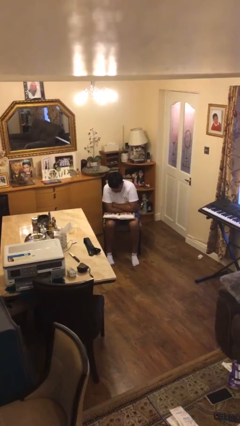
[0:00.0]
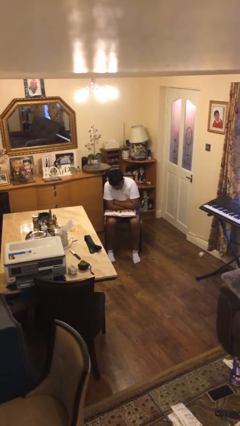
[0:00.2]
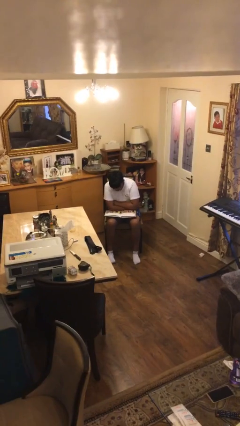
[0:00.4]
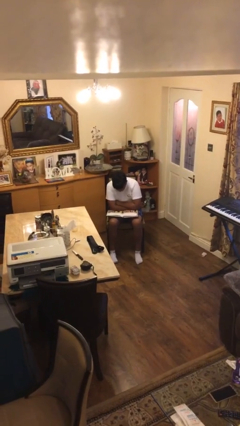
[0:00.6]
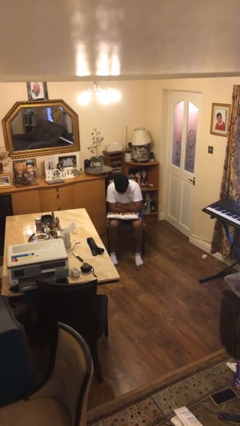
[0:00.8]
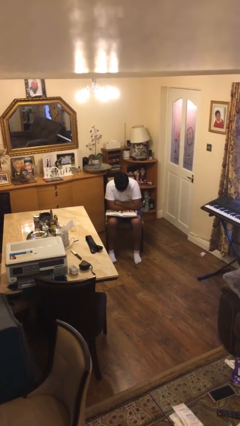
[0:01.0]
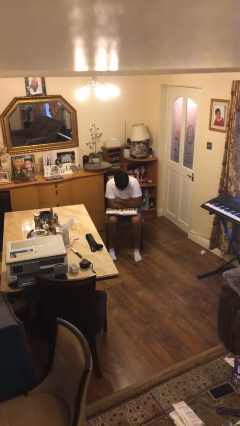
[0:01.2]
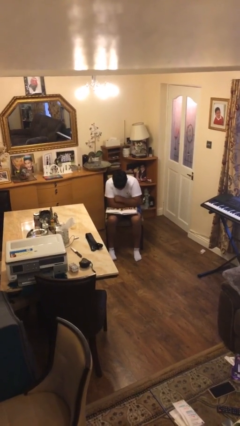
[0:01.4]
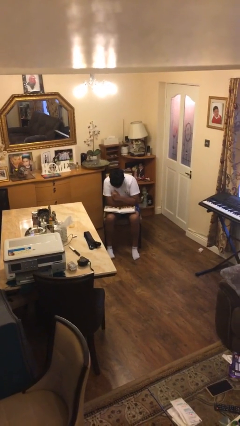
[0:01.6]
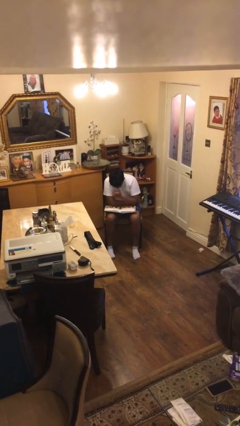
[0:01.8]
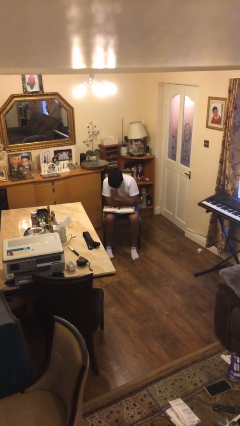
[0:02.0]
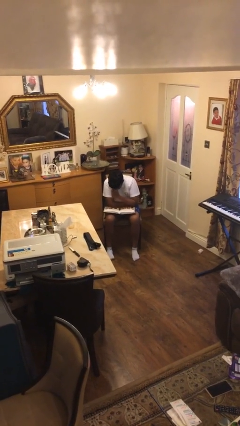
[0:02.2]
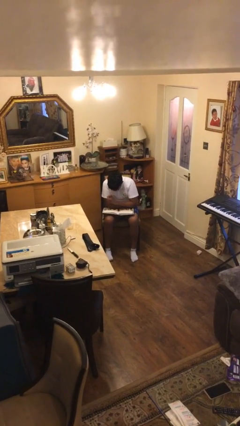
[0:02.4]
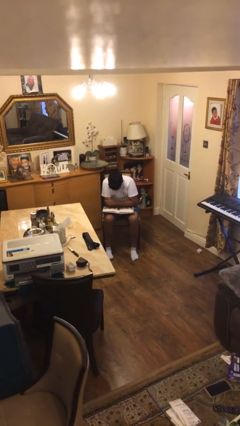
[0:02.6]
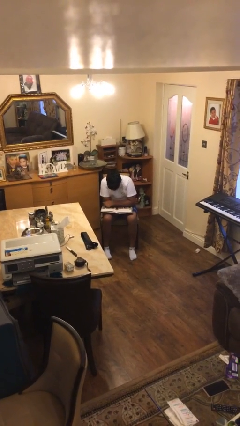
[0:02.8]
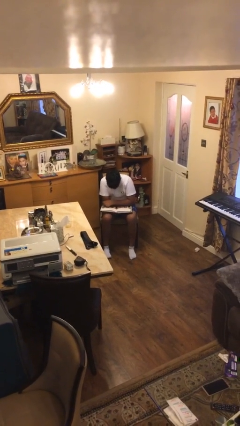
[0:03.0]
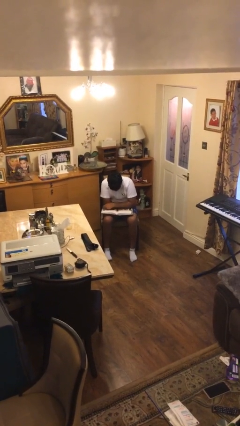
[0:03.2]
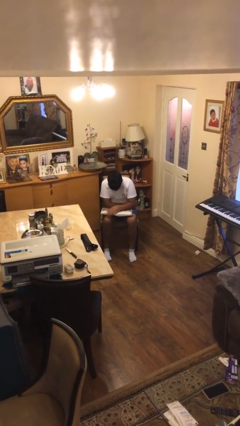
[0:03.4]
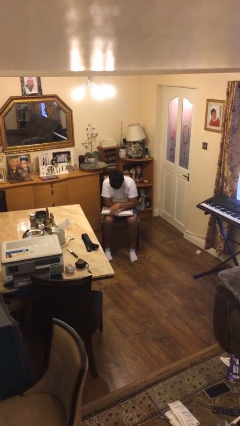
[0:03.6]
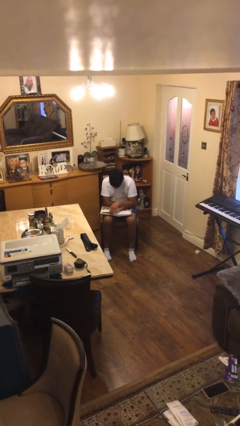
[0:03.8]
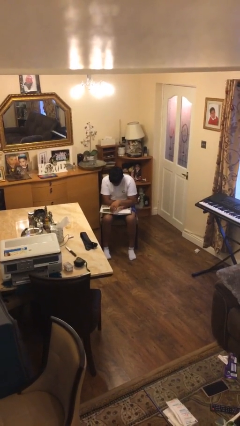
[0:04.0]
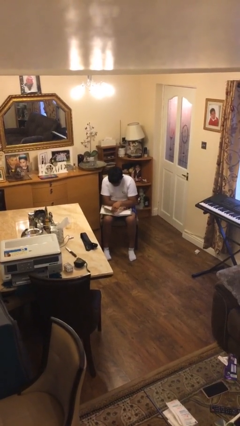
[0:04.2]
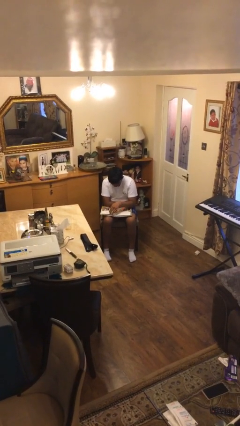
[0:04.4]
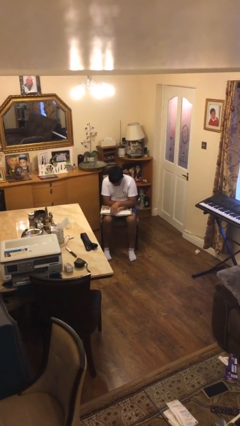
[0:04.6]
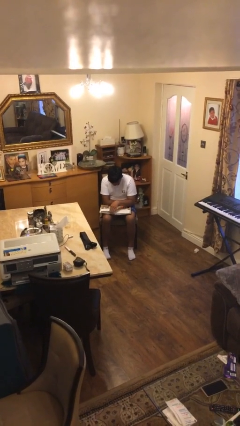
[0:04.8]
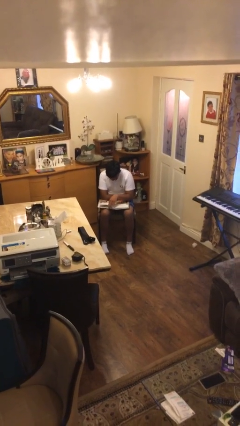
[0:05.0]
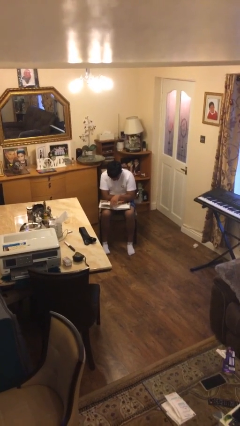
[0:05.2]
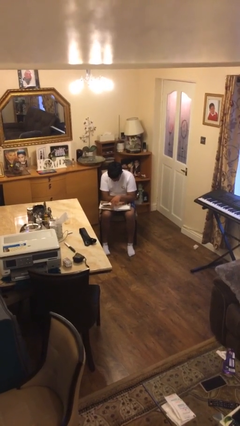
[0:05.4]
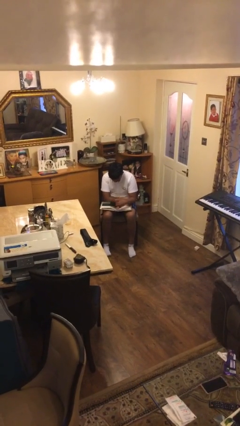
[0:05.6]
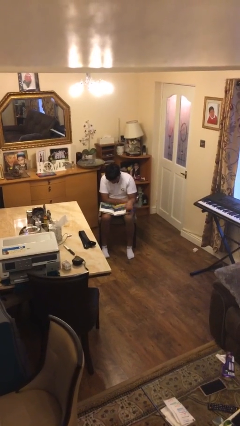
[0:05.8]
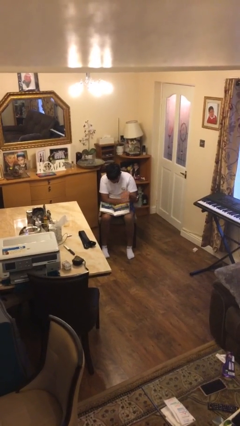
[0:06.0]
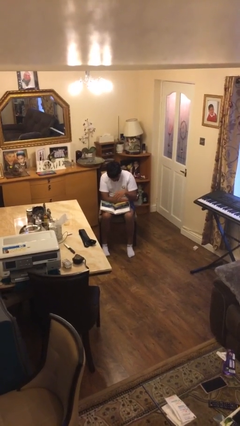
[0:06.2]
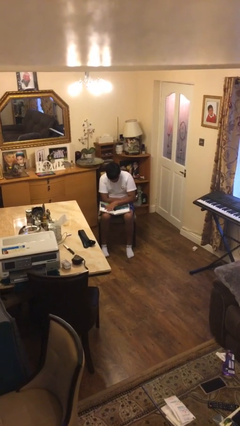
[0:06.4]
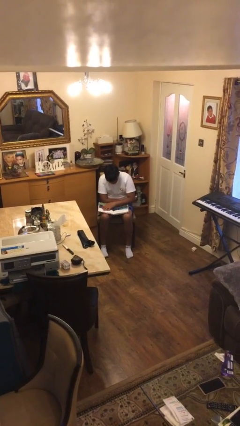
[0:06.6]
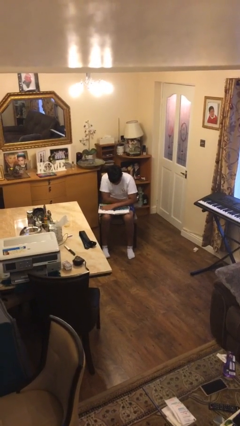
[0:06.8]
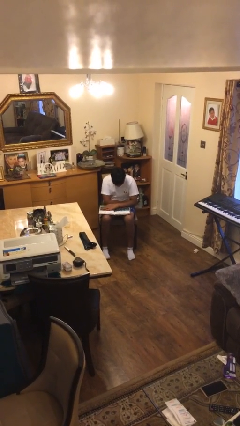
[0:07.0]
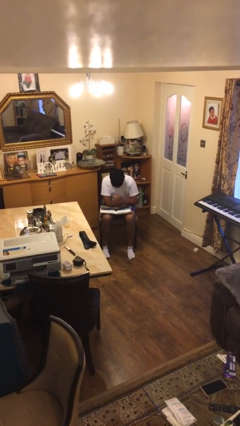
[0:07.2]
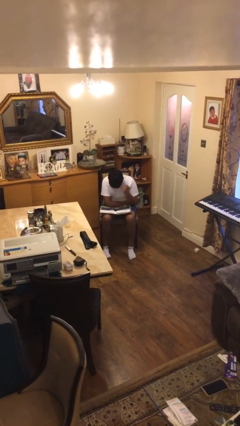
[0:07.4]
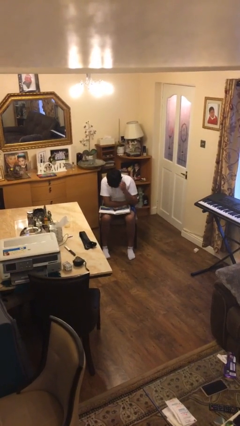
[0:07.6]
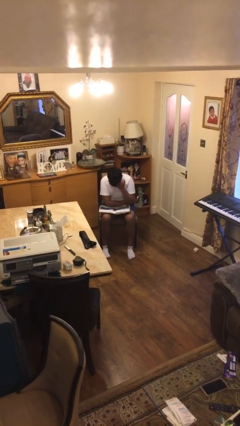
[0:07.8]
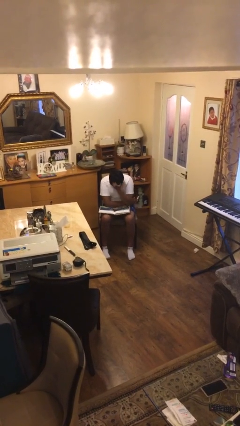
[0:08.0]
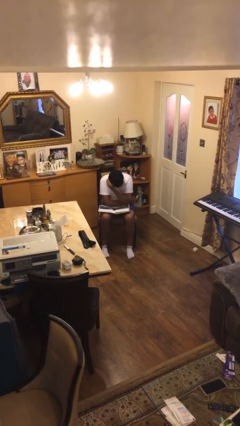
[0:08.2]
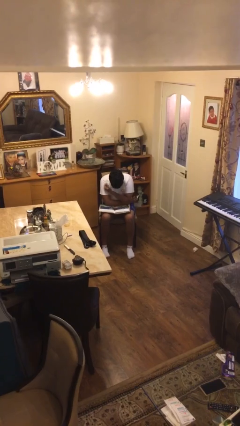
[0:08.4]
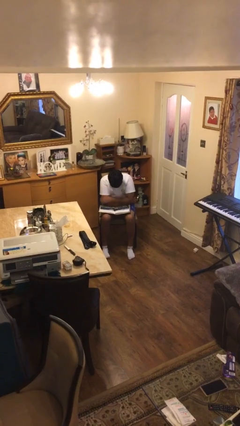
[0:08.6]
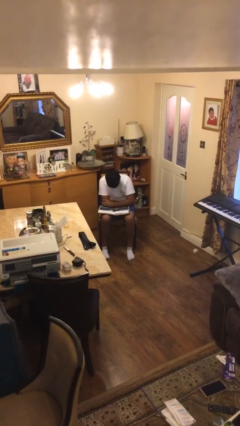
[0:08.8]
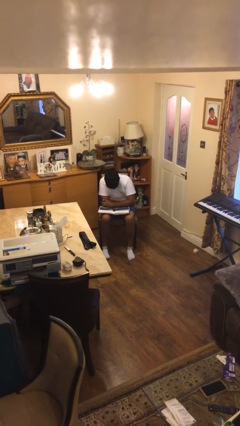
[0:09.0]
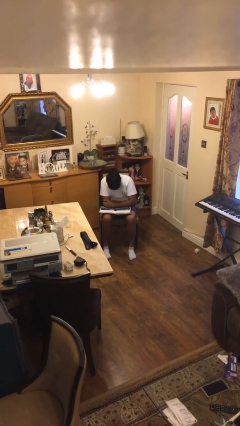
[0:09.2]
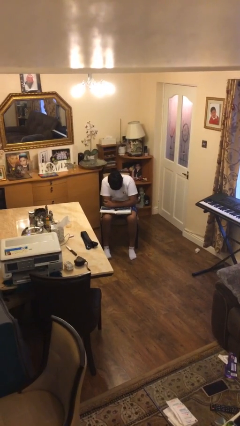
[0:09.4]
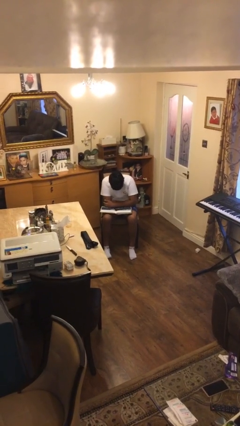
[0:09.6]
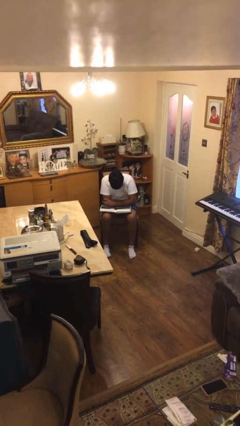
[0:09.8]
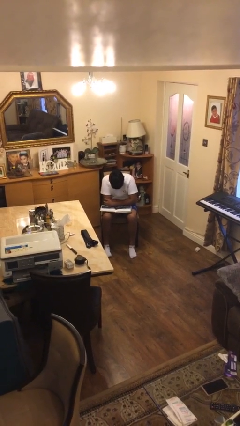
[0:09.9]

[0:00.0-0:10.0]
person reads document

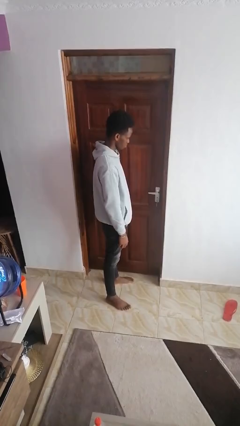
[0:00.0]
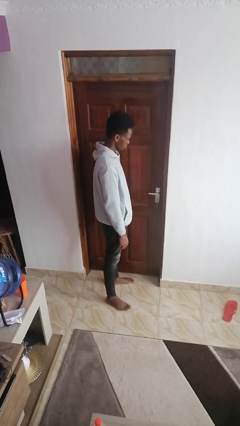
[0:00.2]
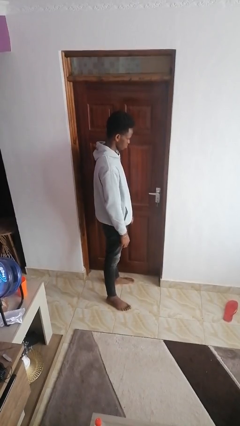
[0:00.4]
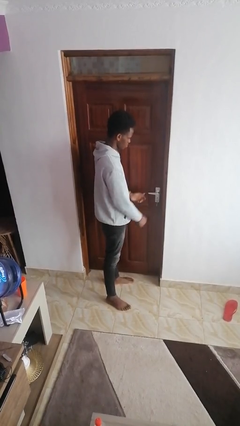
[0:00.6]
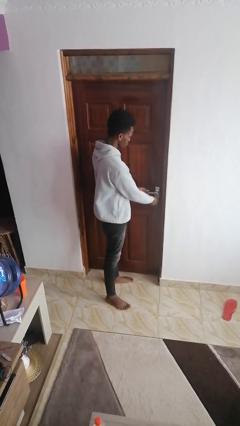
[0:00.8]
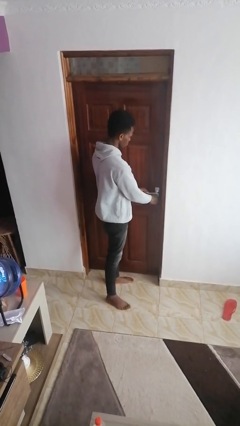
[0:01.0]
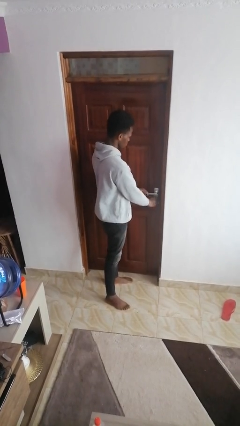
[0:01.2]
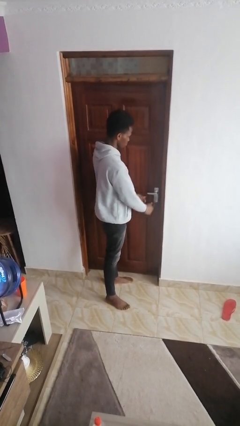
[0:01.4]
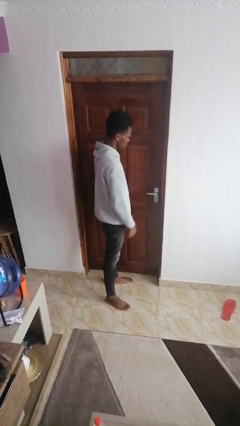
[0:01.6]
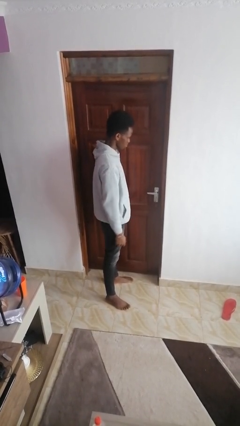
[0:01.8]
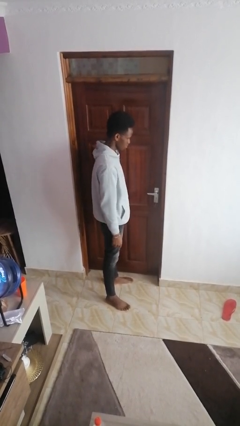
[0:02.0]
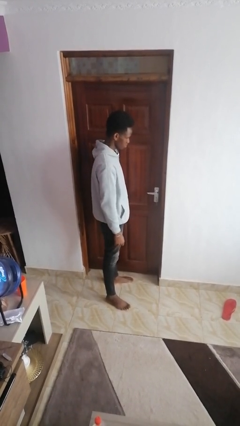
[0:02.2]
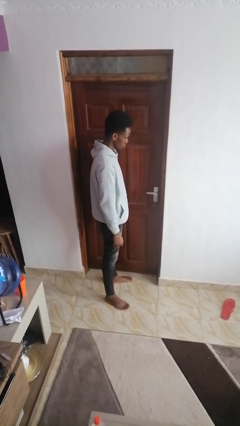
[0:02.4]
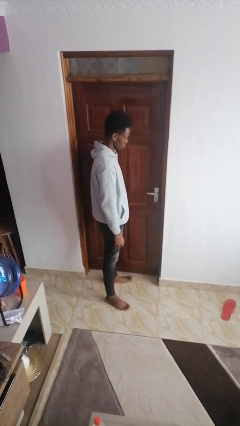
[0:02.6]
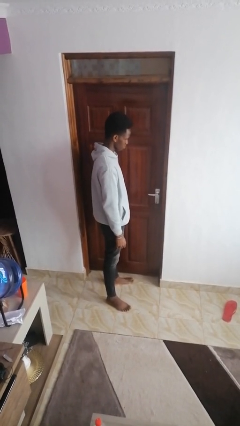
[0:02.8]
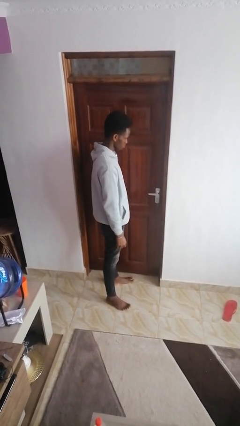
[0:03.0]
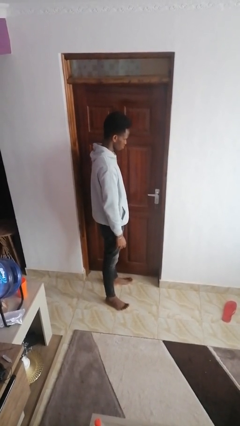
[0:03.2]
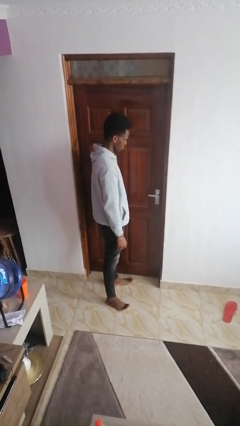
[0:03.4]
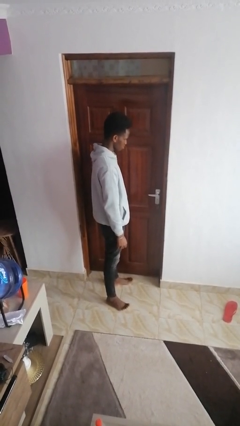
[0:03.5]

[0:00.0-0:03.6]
person unlocks door with keys

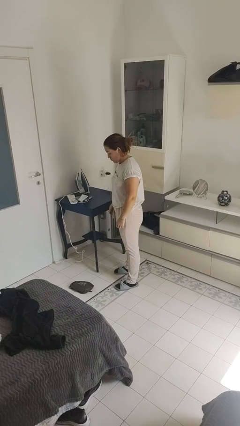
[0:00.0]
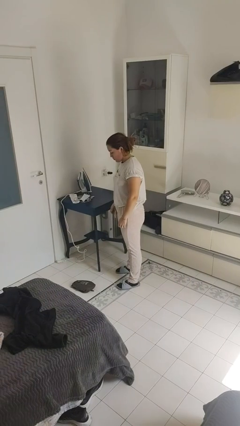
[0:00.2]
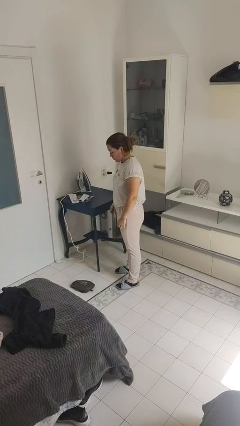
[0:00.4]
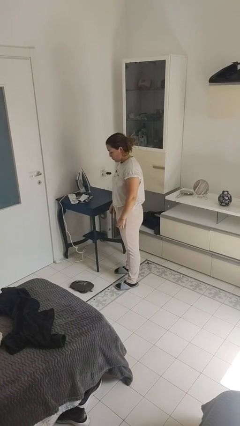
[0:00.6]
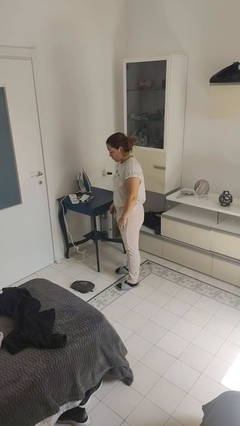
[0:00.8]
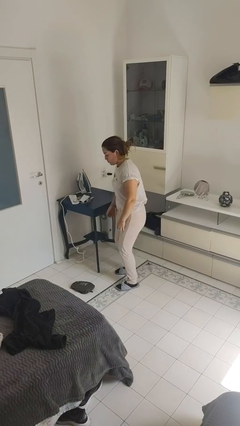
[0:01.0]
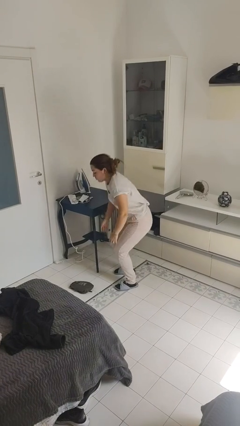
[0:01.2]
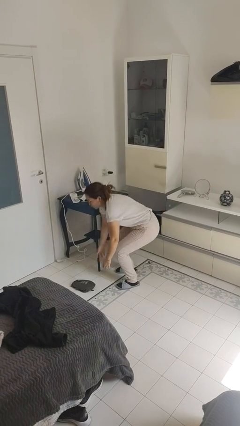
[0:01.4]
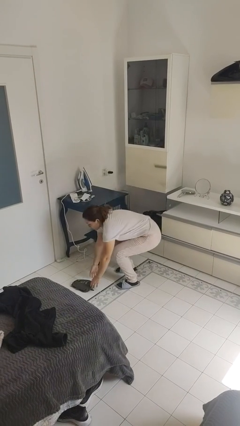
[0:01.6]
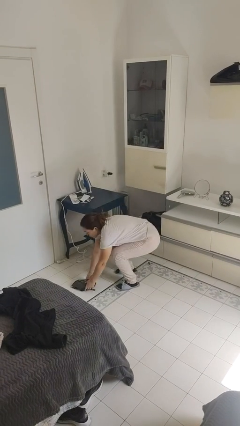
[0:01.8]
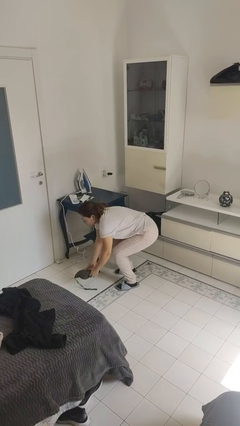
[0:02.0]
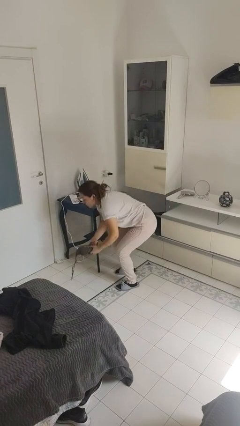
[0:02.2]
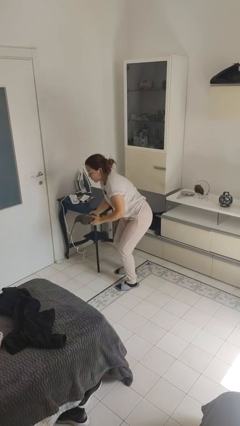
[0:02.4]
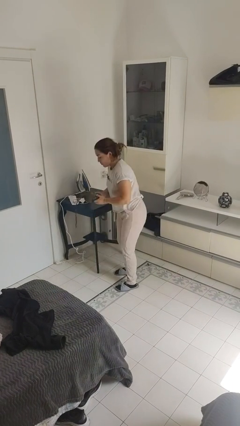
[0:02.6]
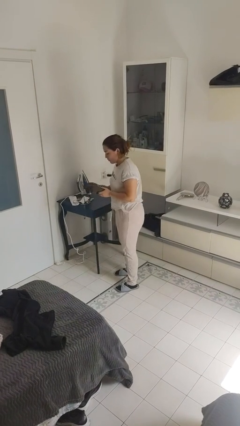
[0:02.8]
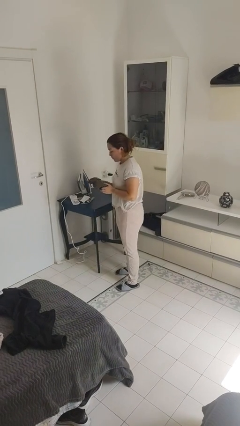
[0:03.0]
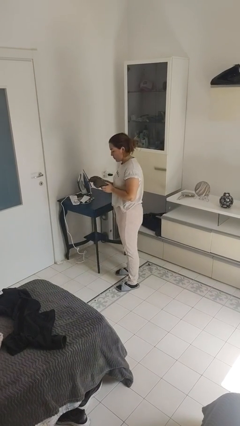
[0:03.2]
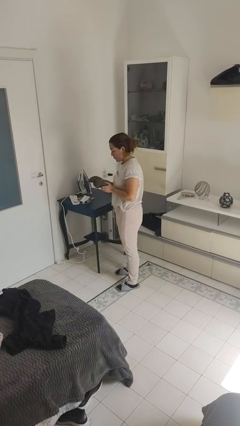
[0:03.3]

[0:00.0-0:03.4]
person picks up object from floor

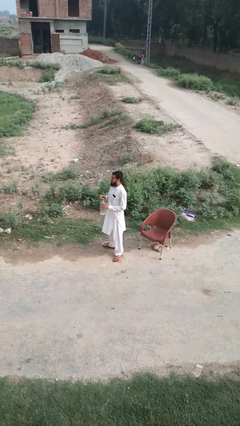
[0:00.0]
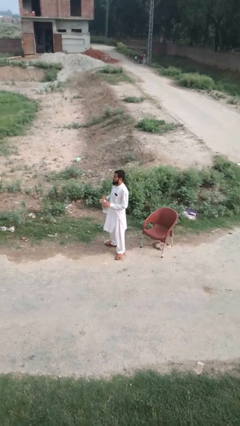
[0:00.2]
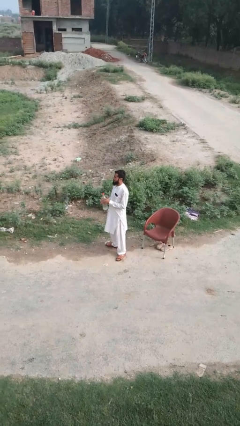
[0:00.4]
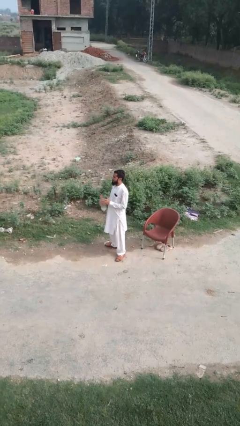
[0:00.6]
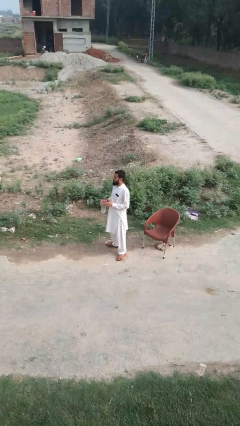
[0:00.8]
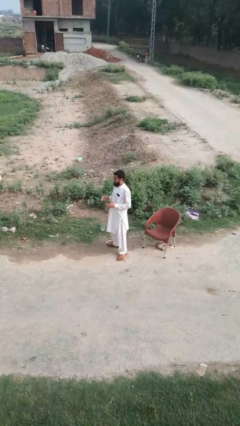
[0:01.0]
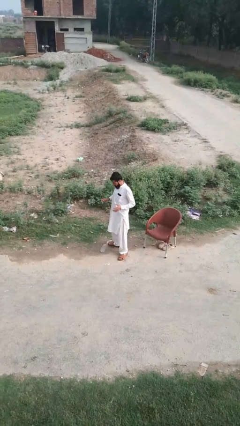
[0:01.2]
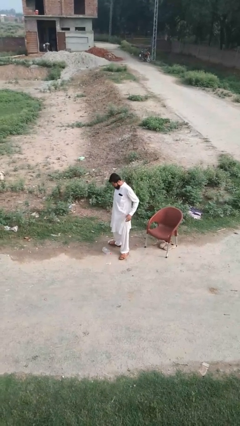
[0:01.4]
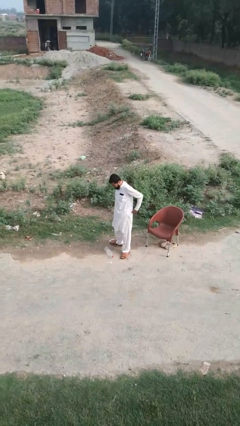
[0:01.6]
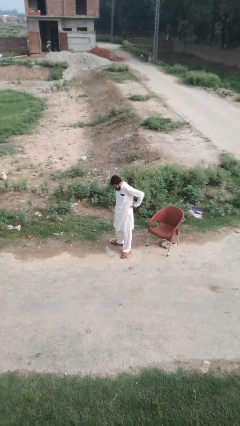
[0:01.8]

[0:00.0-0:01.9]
person drops object
